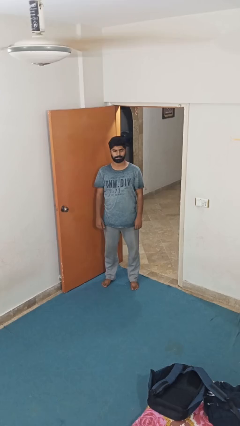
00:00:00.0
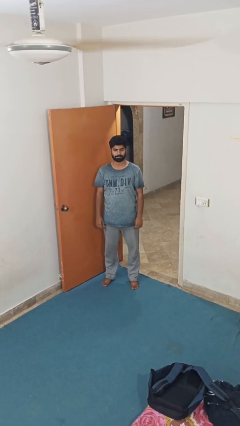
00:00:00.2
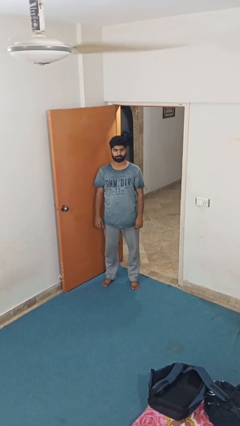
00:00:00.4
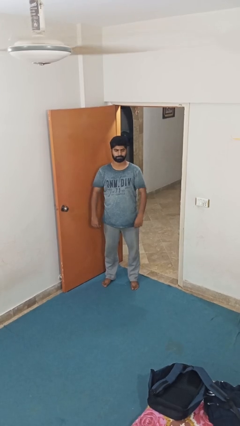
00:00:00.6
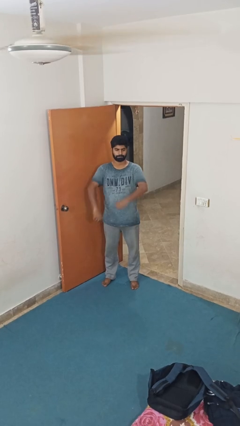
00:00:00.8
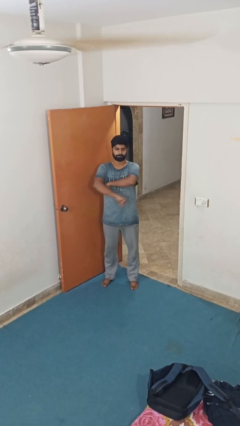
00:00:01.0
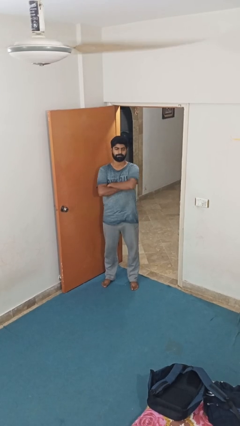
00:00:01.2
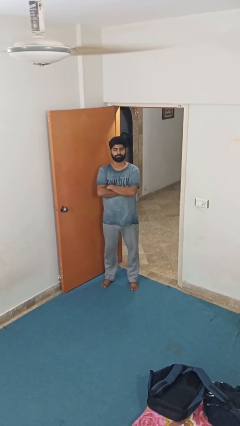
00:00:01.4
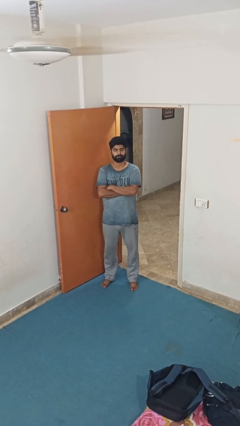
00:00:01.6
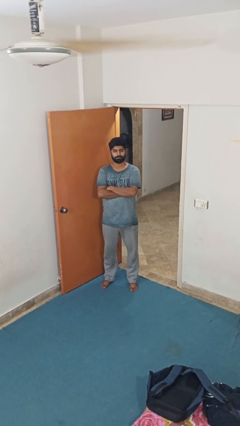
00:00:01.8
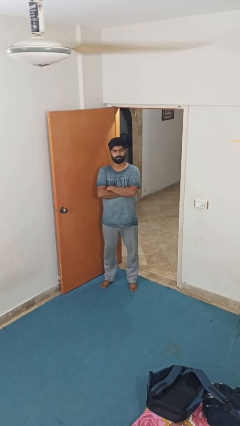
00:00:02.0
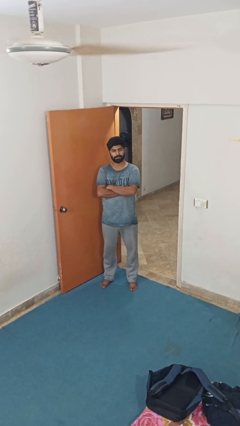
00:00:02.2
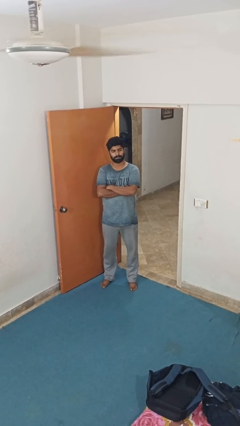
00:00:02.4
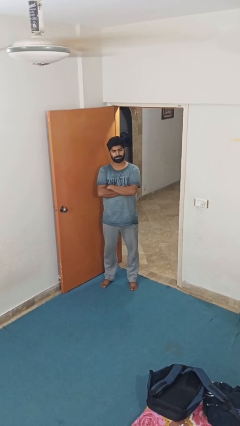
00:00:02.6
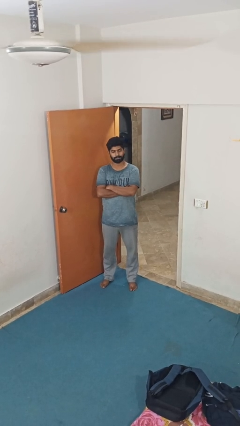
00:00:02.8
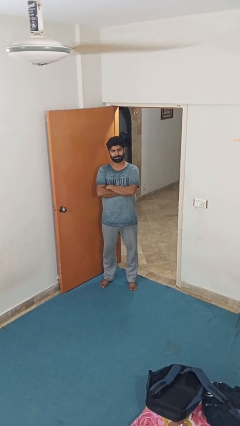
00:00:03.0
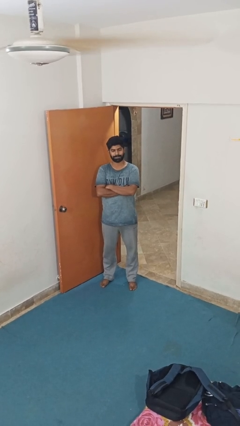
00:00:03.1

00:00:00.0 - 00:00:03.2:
person crosses arms

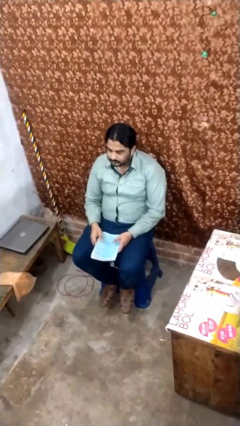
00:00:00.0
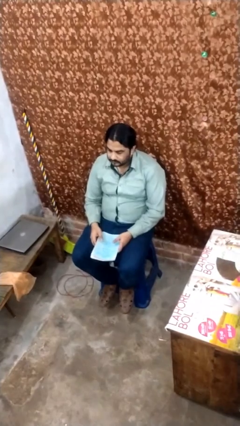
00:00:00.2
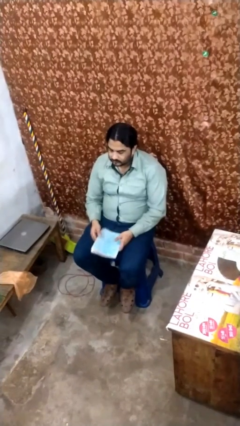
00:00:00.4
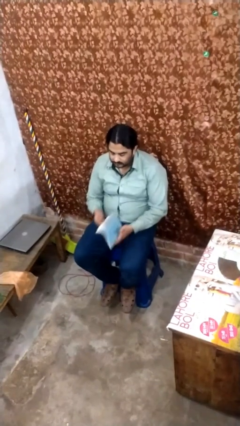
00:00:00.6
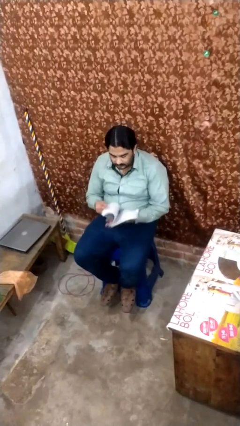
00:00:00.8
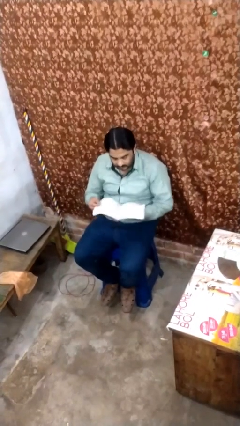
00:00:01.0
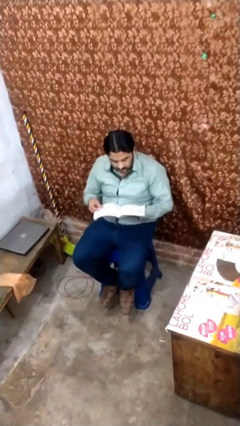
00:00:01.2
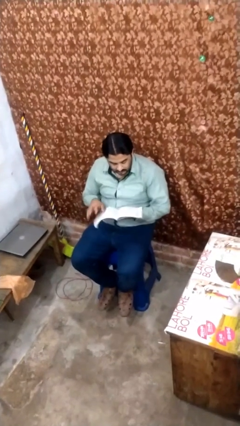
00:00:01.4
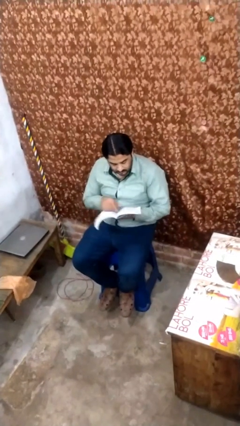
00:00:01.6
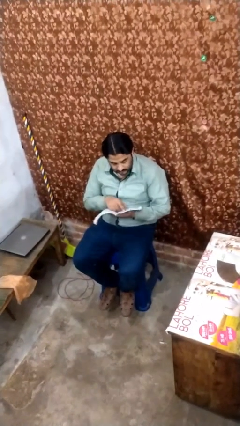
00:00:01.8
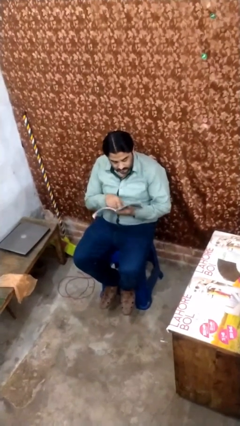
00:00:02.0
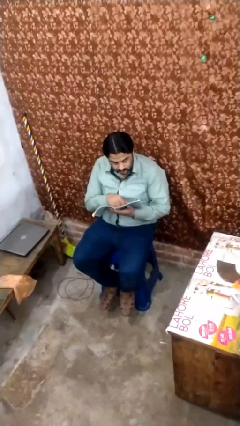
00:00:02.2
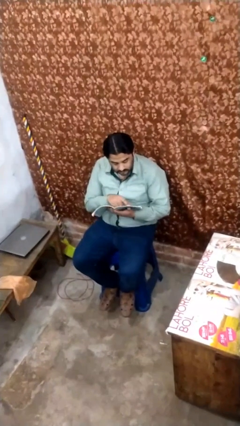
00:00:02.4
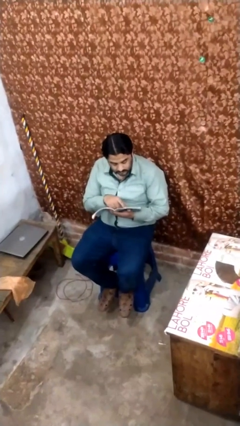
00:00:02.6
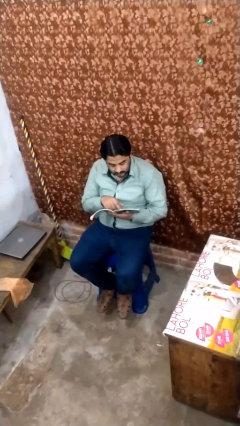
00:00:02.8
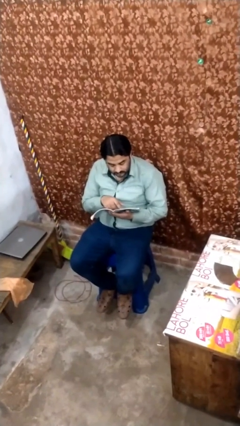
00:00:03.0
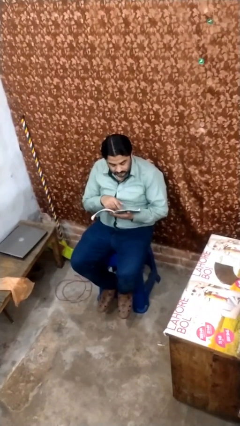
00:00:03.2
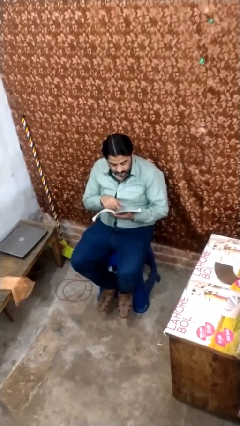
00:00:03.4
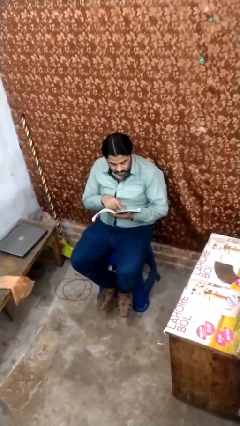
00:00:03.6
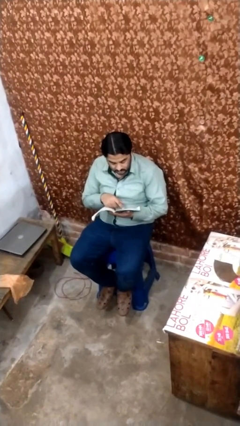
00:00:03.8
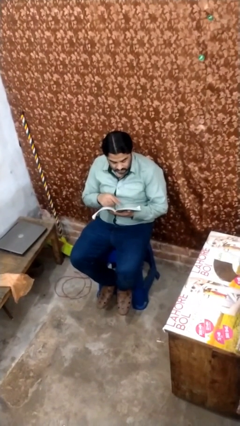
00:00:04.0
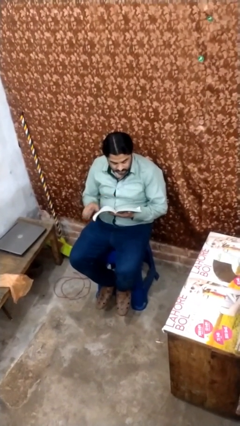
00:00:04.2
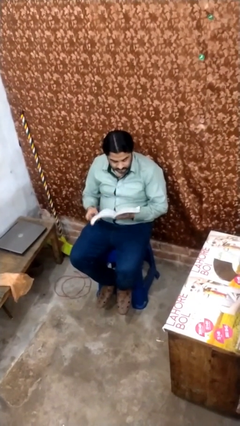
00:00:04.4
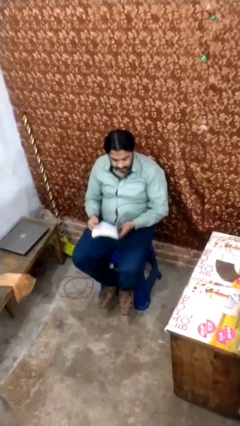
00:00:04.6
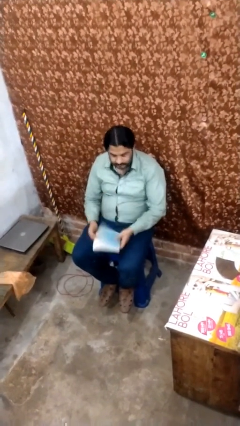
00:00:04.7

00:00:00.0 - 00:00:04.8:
person reads document

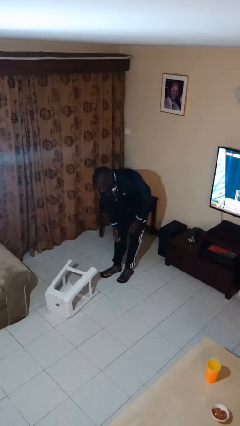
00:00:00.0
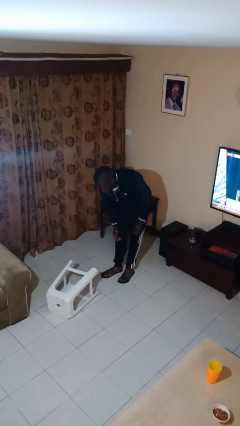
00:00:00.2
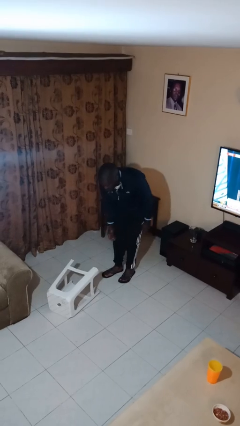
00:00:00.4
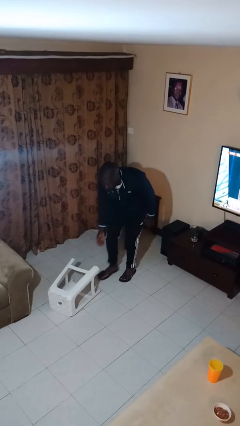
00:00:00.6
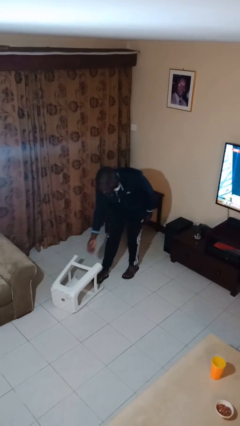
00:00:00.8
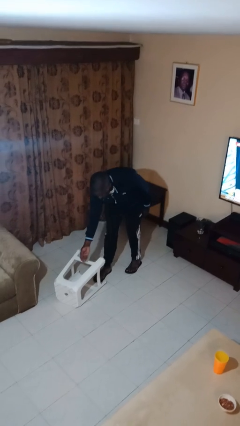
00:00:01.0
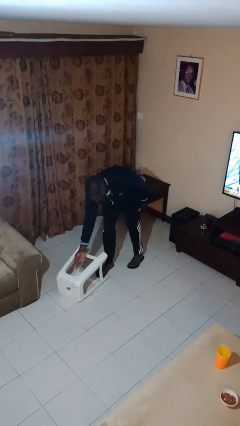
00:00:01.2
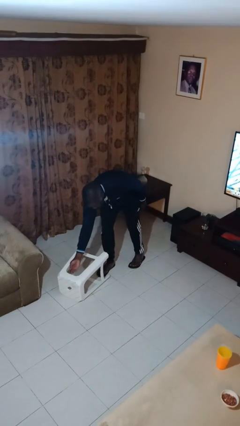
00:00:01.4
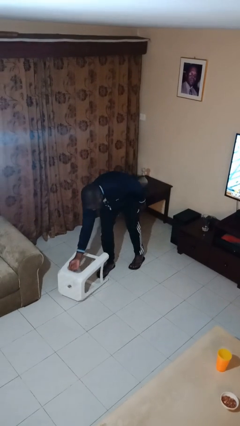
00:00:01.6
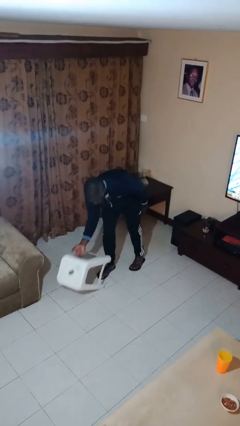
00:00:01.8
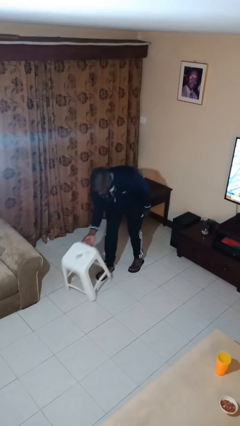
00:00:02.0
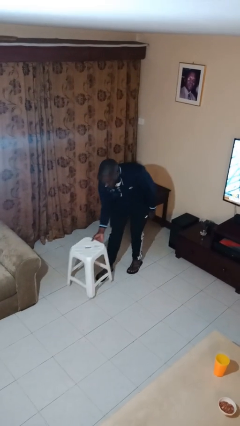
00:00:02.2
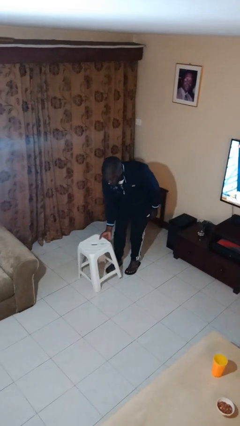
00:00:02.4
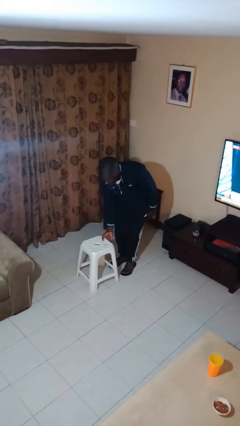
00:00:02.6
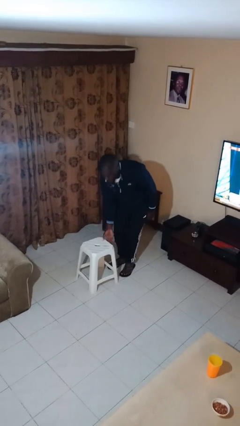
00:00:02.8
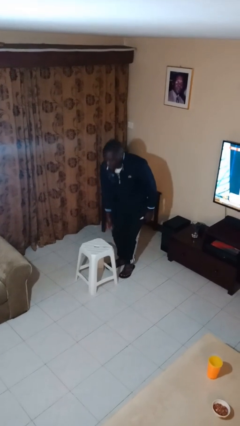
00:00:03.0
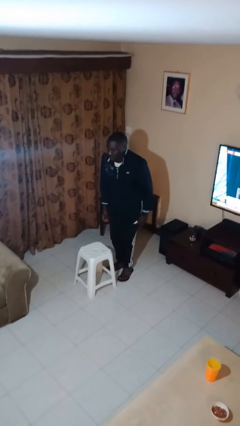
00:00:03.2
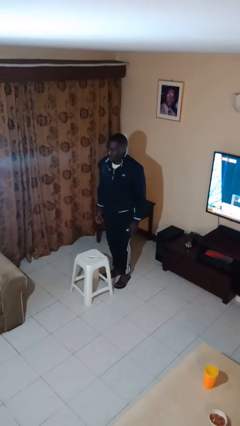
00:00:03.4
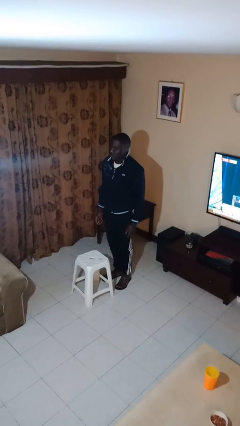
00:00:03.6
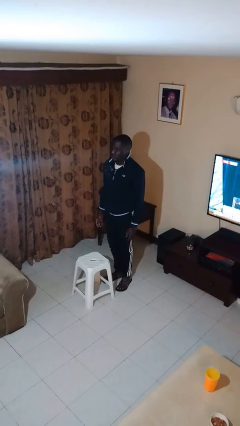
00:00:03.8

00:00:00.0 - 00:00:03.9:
person sets upright furniture

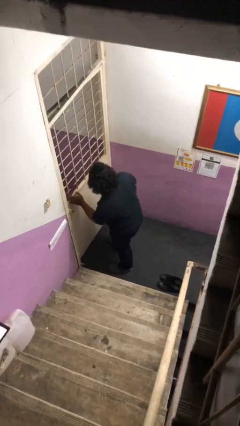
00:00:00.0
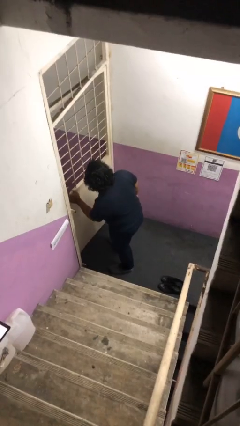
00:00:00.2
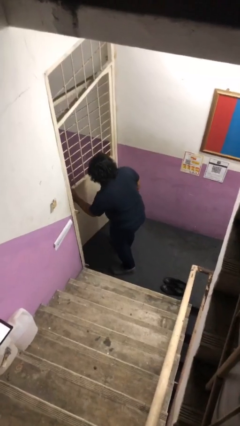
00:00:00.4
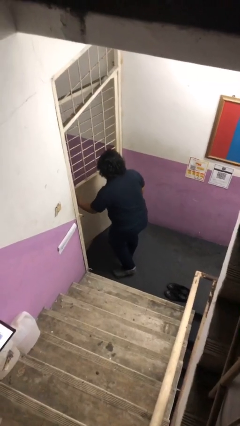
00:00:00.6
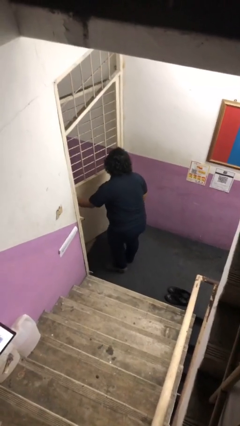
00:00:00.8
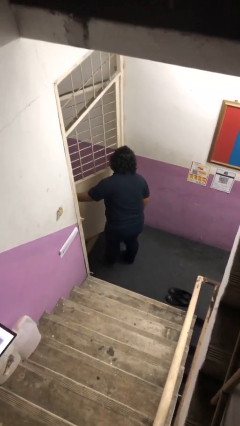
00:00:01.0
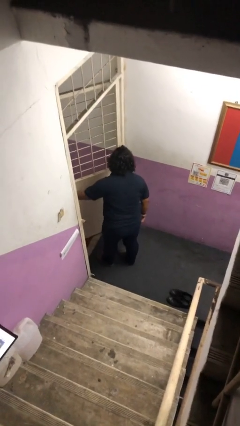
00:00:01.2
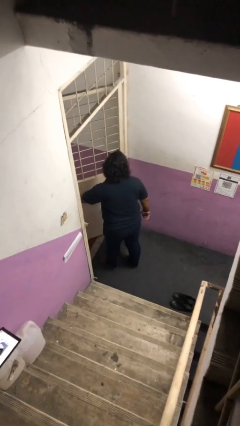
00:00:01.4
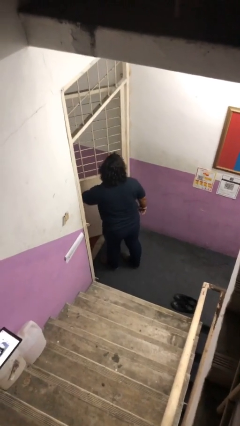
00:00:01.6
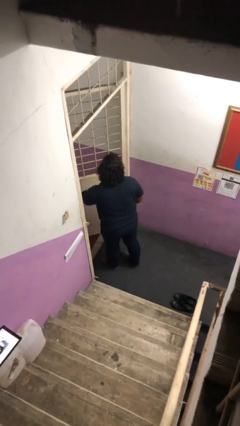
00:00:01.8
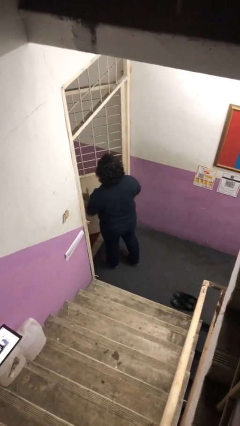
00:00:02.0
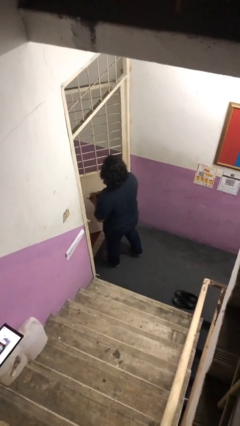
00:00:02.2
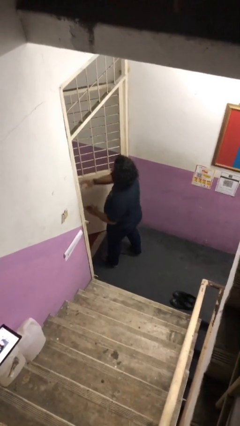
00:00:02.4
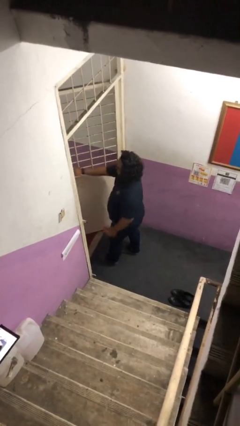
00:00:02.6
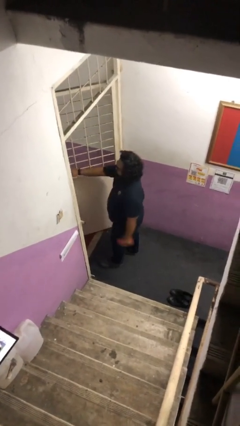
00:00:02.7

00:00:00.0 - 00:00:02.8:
person opens facility door

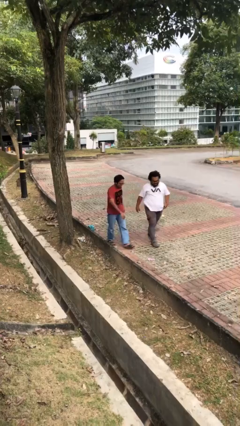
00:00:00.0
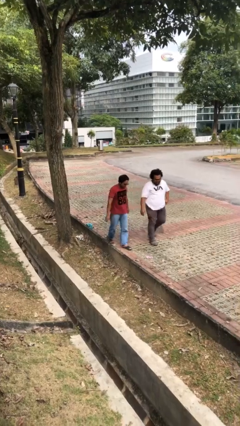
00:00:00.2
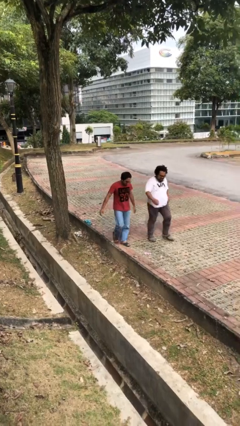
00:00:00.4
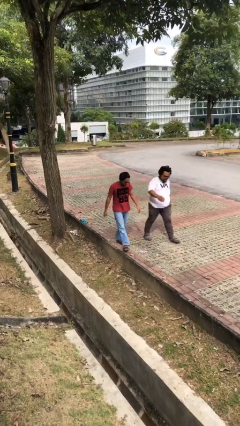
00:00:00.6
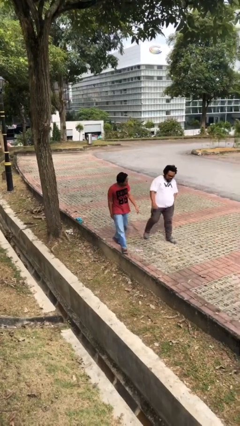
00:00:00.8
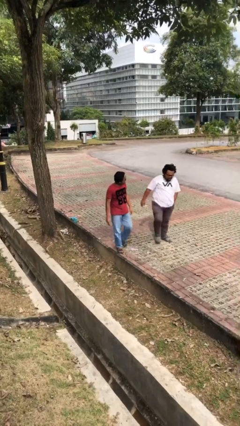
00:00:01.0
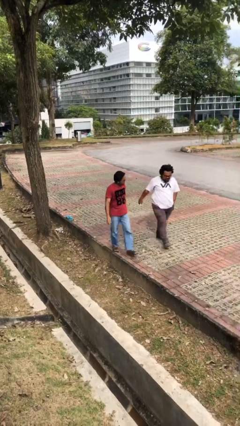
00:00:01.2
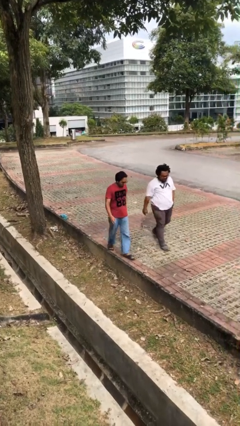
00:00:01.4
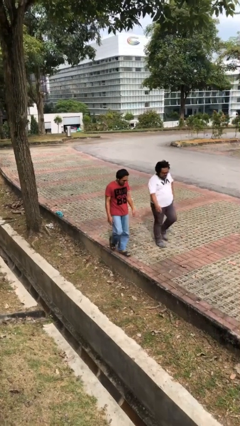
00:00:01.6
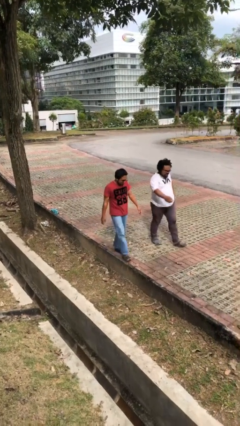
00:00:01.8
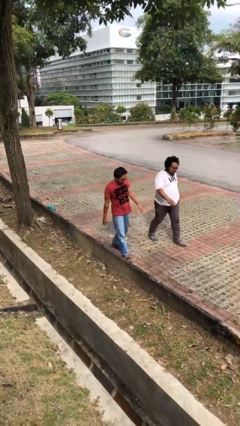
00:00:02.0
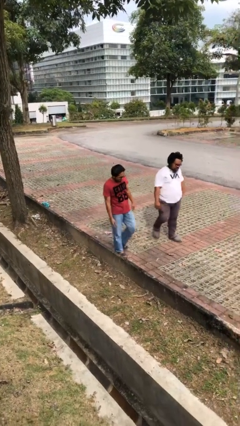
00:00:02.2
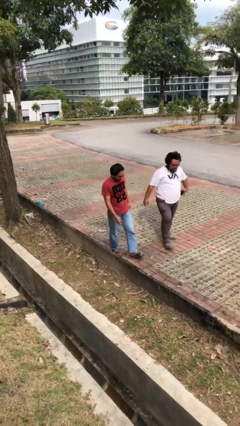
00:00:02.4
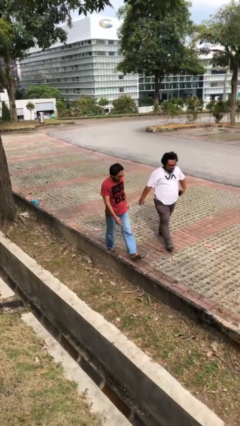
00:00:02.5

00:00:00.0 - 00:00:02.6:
person talks to person
